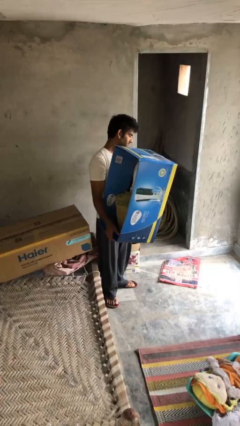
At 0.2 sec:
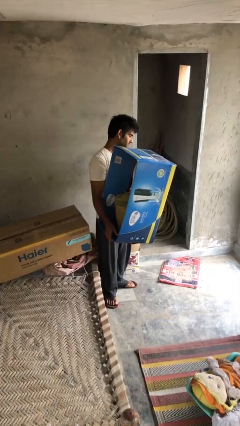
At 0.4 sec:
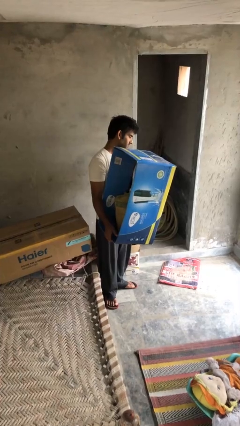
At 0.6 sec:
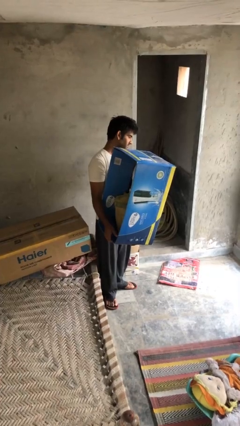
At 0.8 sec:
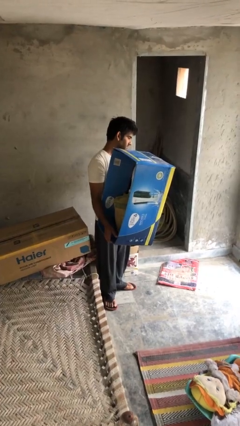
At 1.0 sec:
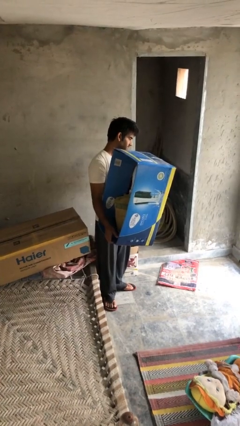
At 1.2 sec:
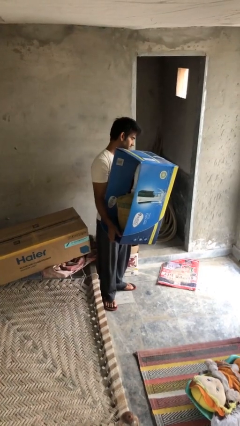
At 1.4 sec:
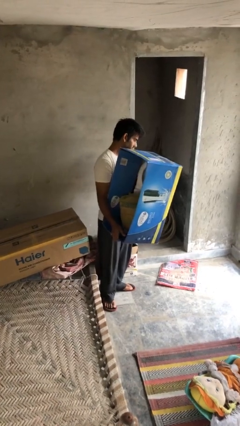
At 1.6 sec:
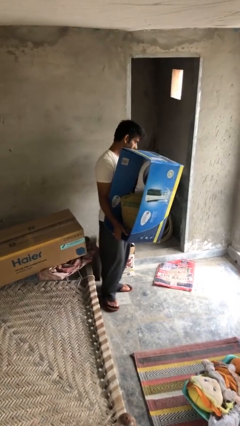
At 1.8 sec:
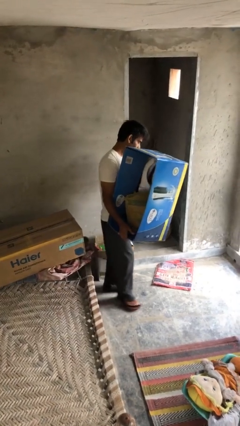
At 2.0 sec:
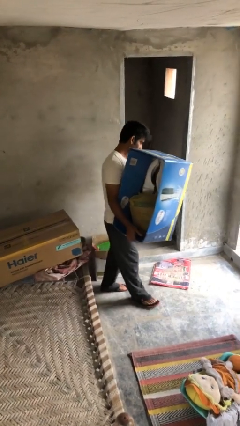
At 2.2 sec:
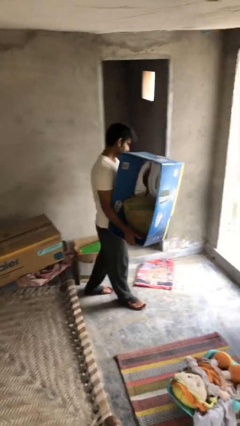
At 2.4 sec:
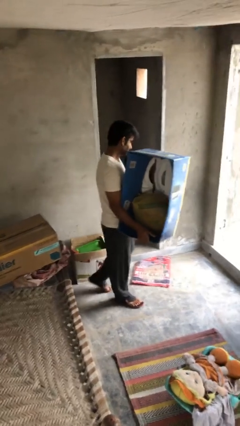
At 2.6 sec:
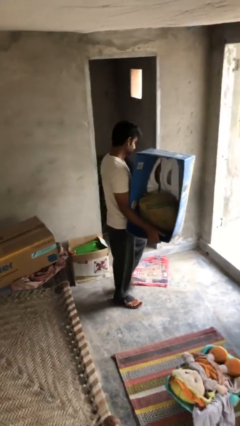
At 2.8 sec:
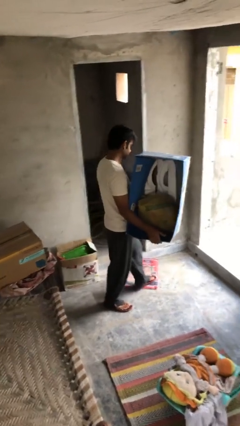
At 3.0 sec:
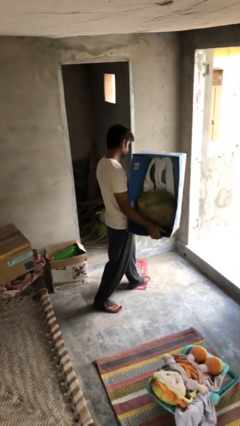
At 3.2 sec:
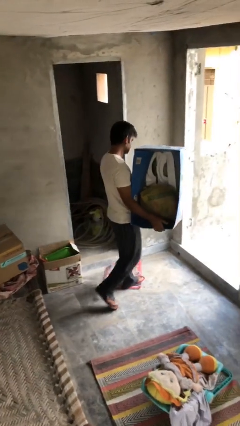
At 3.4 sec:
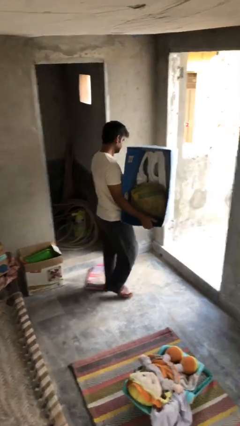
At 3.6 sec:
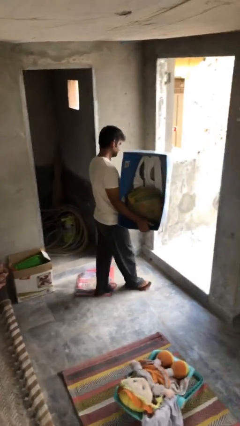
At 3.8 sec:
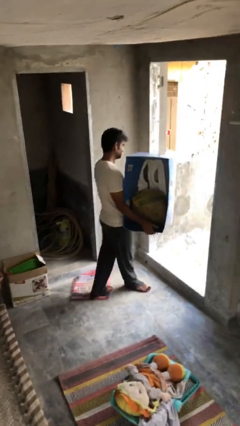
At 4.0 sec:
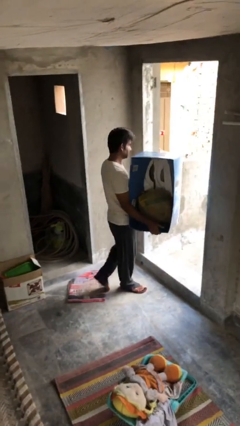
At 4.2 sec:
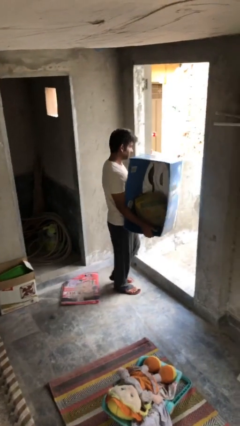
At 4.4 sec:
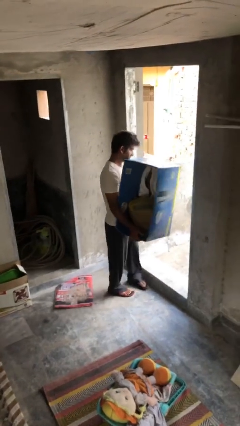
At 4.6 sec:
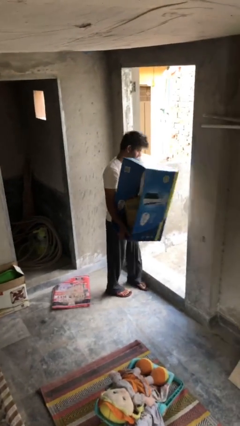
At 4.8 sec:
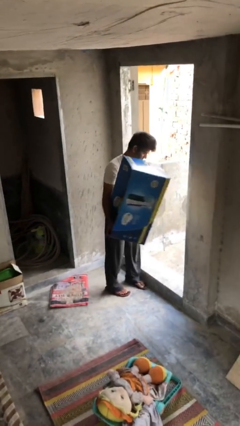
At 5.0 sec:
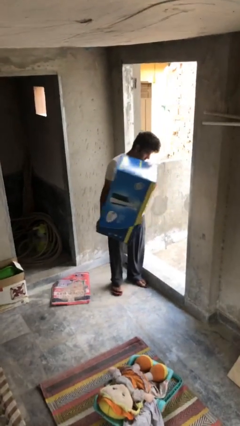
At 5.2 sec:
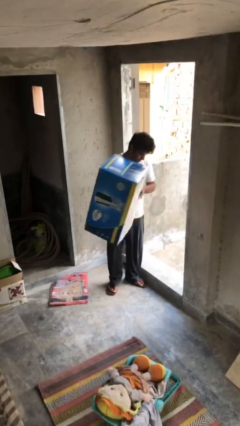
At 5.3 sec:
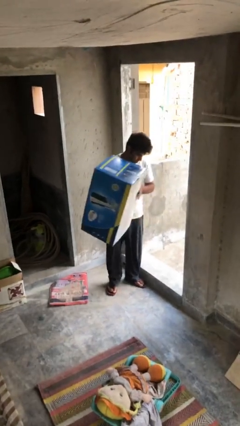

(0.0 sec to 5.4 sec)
person carries heavy object

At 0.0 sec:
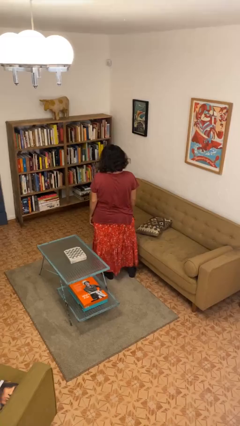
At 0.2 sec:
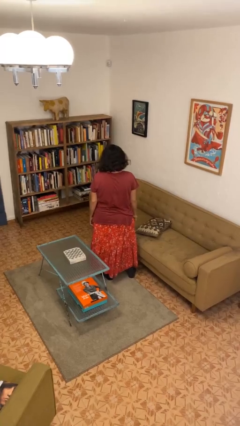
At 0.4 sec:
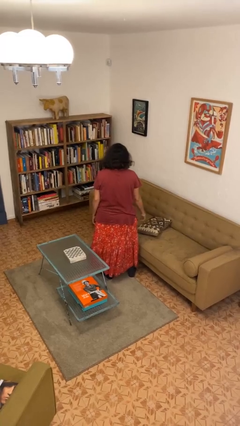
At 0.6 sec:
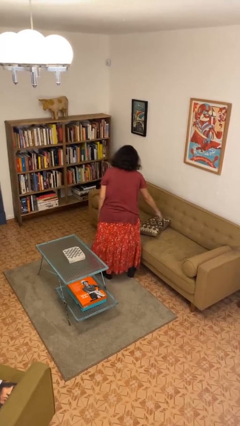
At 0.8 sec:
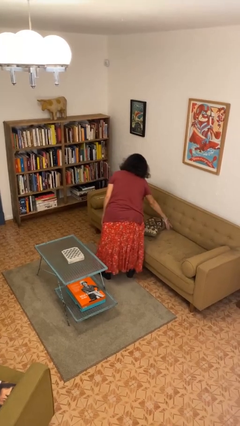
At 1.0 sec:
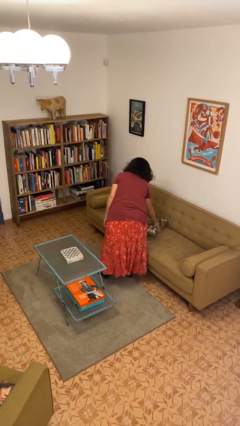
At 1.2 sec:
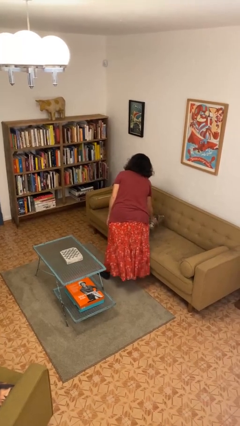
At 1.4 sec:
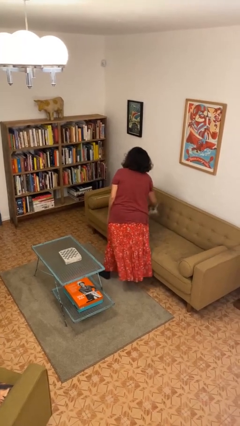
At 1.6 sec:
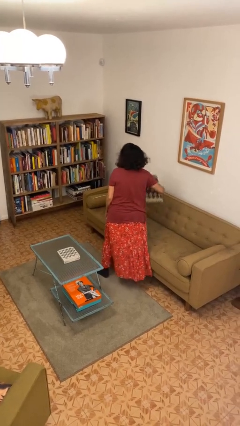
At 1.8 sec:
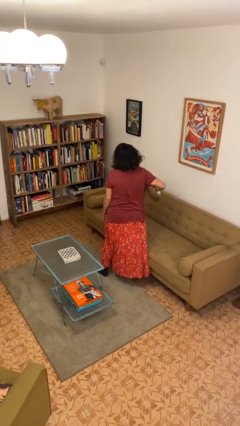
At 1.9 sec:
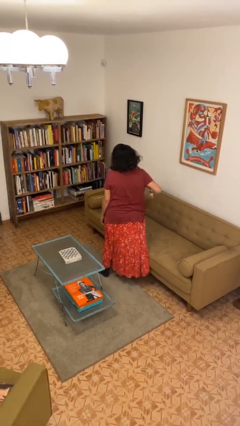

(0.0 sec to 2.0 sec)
person picks up object from couch

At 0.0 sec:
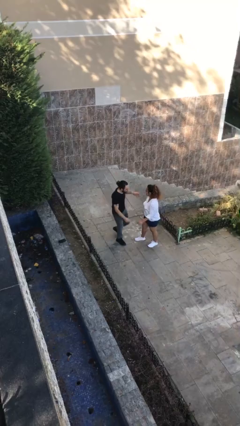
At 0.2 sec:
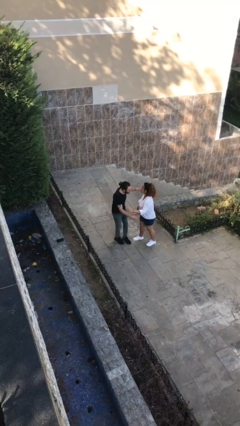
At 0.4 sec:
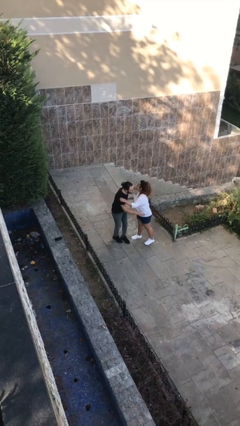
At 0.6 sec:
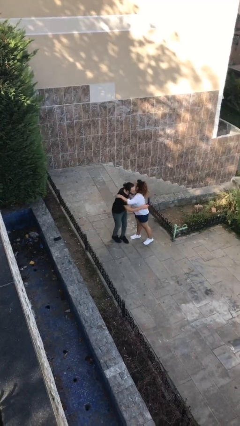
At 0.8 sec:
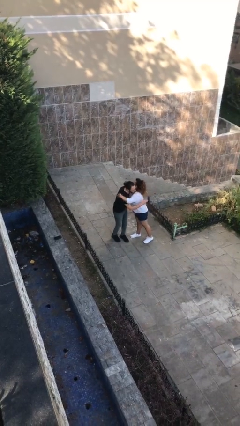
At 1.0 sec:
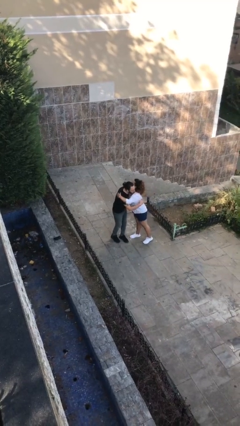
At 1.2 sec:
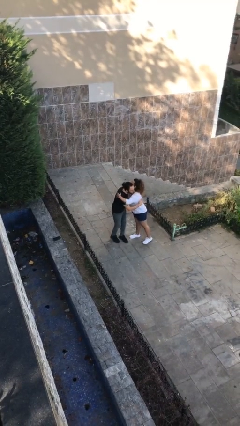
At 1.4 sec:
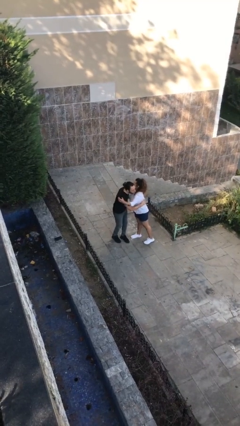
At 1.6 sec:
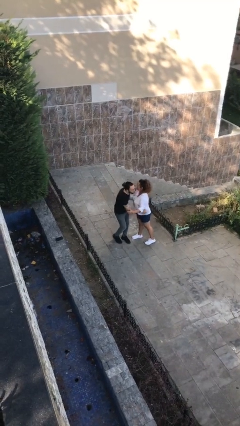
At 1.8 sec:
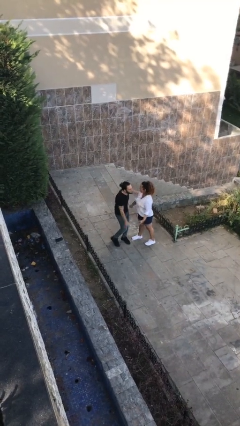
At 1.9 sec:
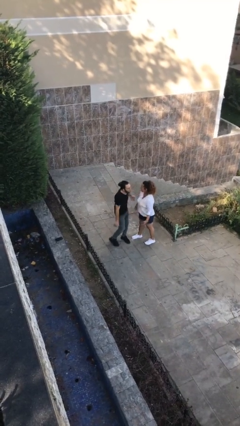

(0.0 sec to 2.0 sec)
person embraces person

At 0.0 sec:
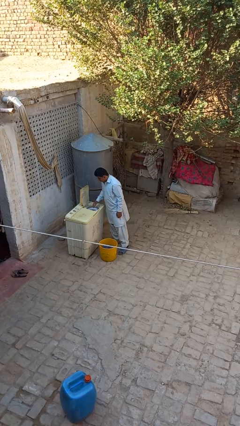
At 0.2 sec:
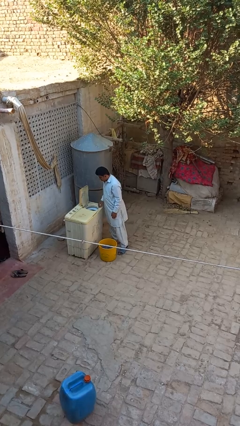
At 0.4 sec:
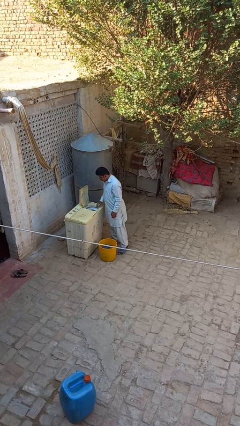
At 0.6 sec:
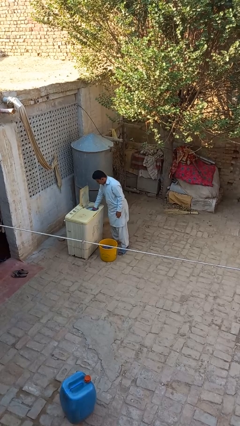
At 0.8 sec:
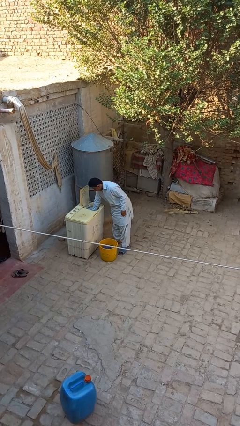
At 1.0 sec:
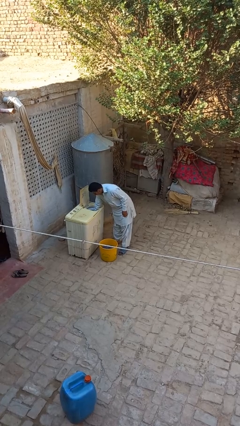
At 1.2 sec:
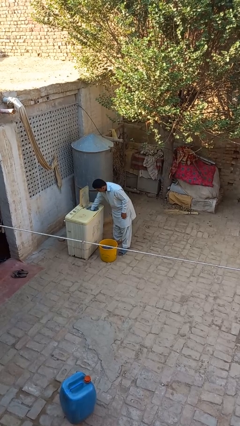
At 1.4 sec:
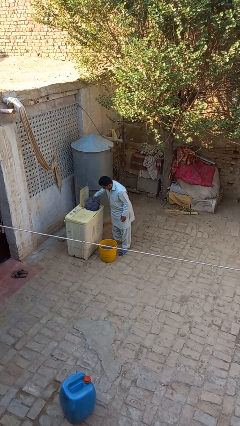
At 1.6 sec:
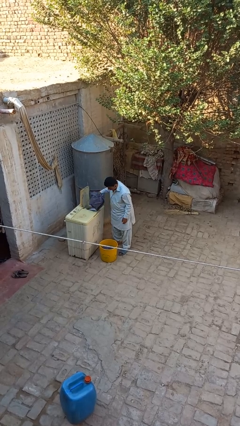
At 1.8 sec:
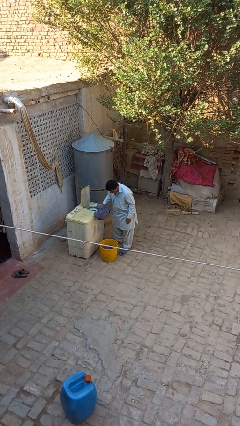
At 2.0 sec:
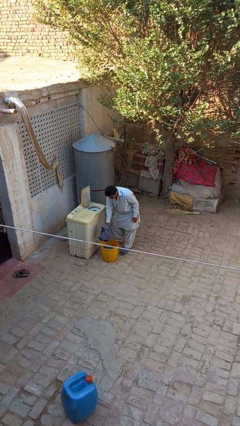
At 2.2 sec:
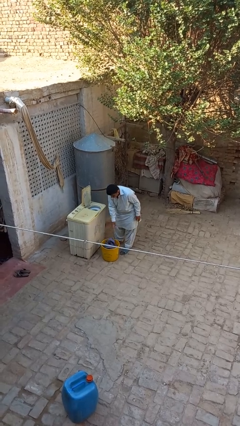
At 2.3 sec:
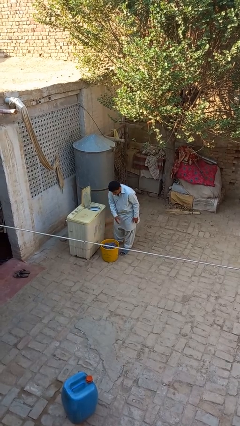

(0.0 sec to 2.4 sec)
person unloads dryer

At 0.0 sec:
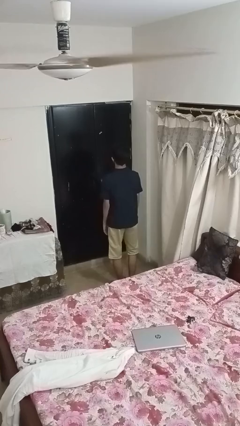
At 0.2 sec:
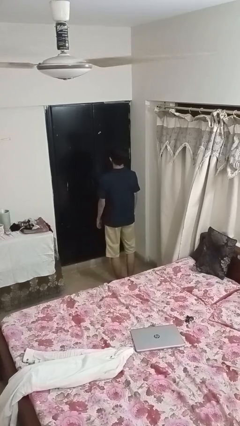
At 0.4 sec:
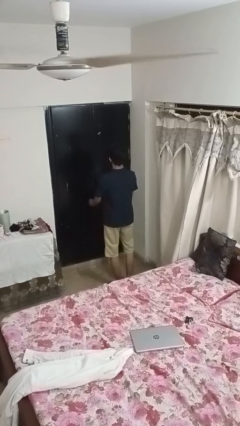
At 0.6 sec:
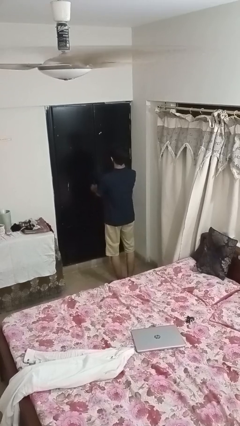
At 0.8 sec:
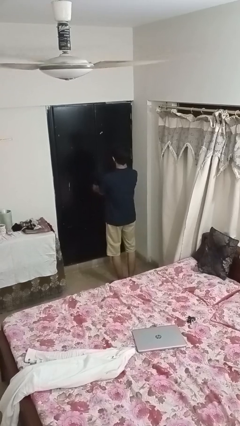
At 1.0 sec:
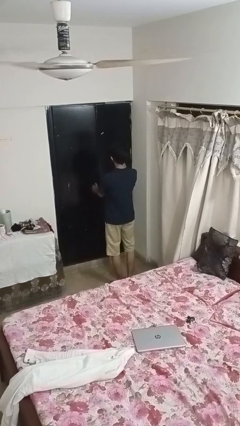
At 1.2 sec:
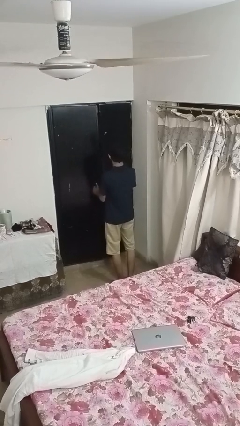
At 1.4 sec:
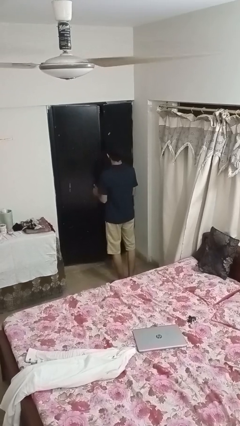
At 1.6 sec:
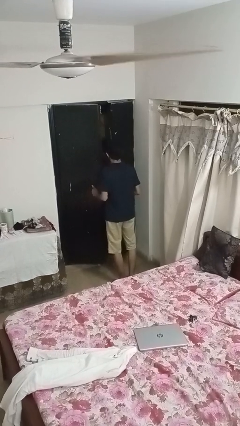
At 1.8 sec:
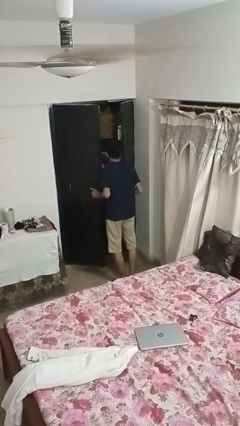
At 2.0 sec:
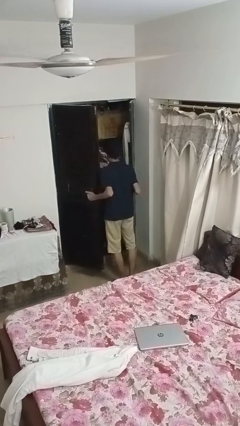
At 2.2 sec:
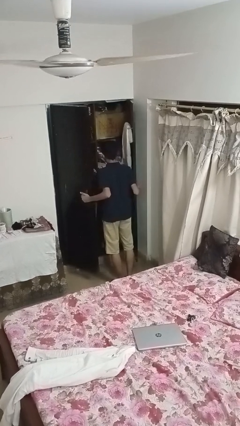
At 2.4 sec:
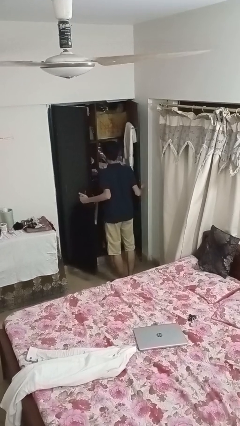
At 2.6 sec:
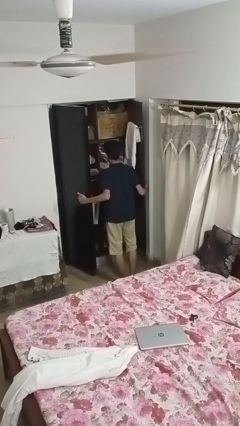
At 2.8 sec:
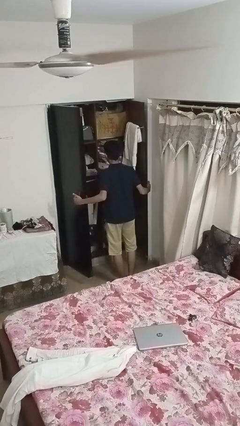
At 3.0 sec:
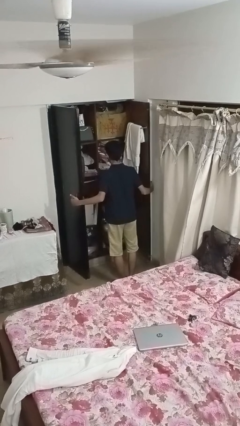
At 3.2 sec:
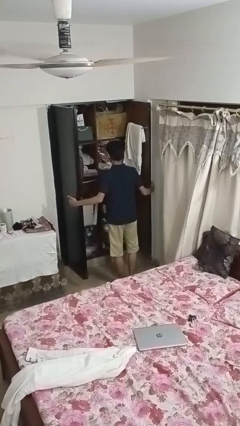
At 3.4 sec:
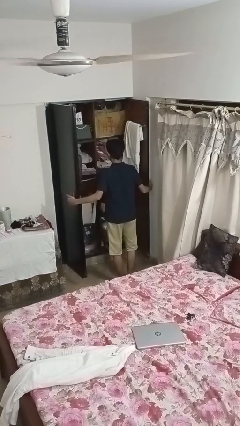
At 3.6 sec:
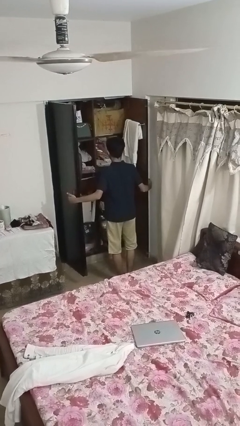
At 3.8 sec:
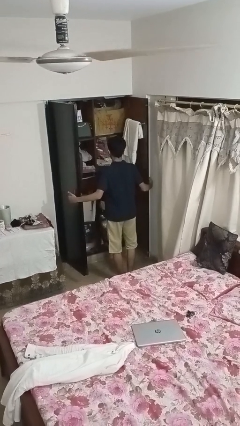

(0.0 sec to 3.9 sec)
person opens closet door

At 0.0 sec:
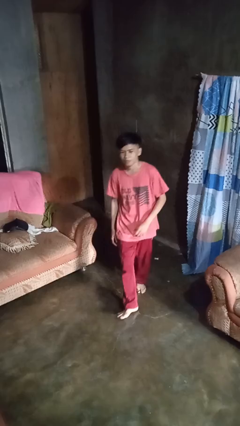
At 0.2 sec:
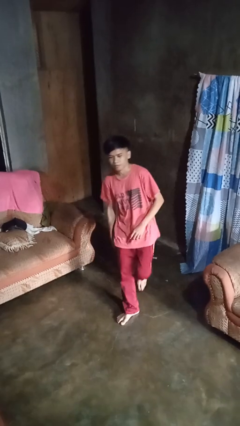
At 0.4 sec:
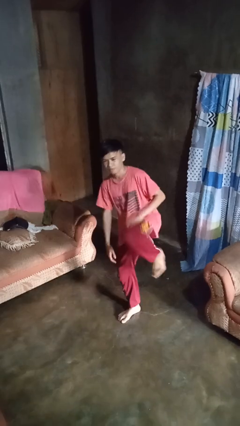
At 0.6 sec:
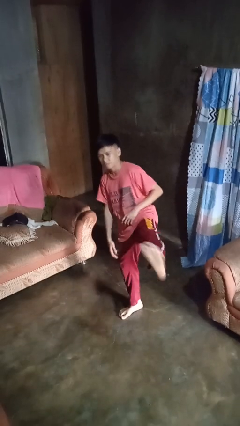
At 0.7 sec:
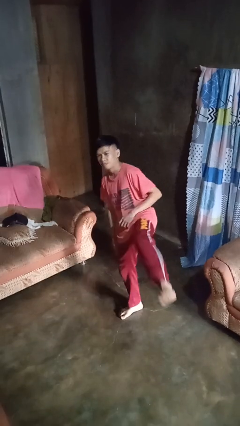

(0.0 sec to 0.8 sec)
person karate kicks

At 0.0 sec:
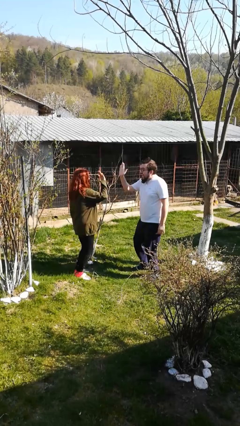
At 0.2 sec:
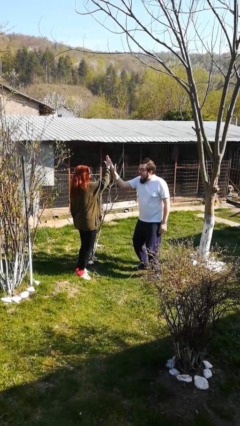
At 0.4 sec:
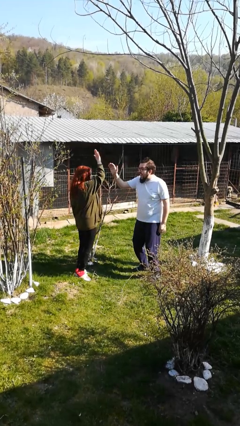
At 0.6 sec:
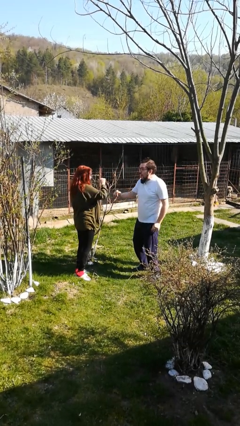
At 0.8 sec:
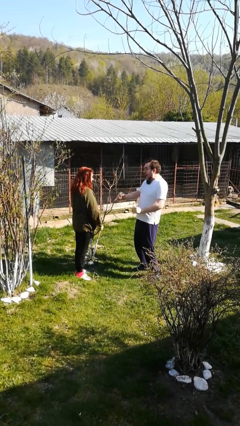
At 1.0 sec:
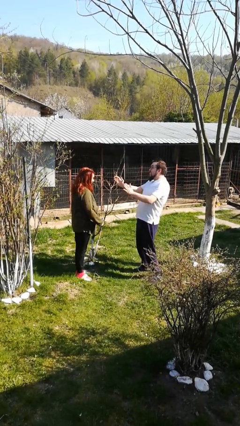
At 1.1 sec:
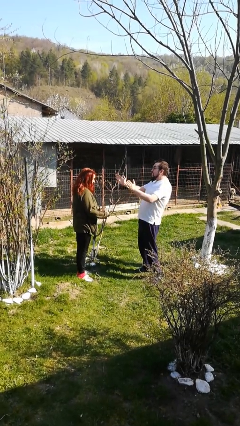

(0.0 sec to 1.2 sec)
person highfives hand
